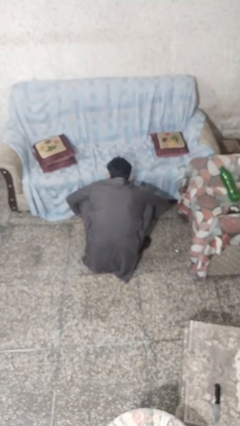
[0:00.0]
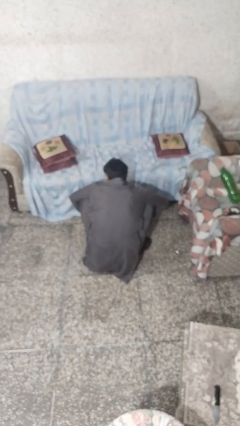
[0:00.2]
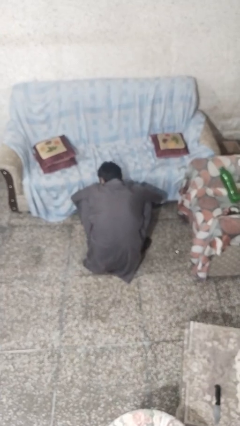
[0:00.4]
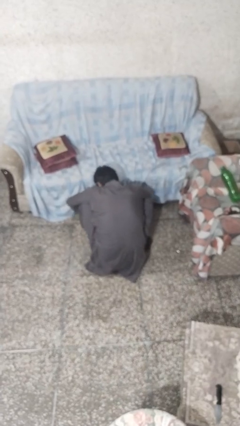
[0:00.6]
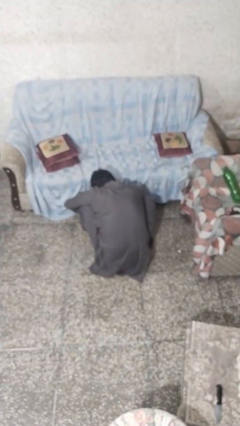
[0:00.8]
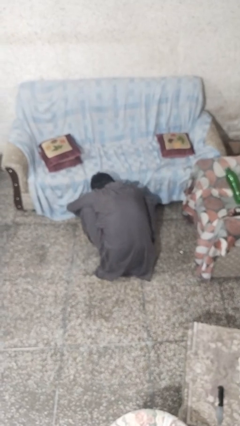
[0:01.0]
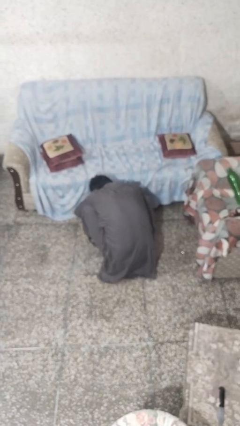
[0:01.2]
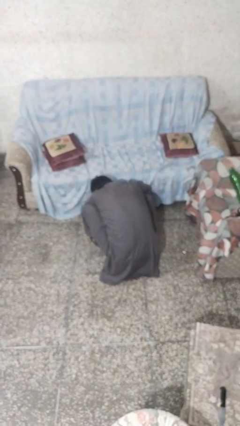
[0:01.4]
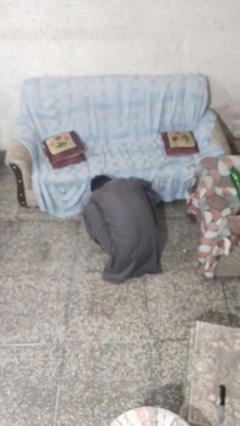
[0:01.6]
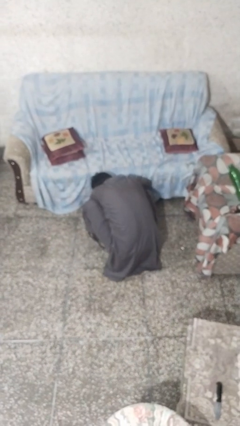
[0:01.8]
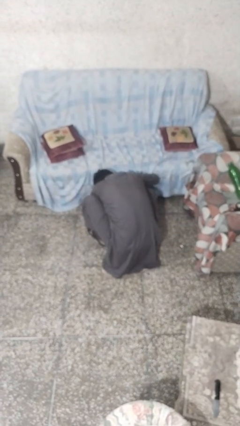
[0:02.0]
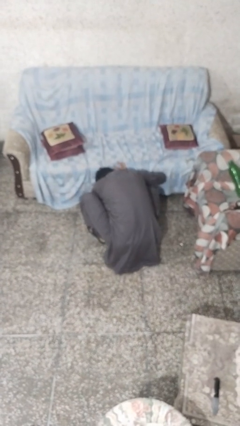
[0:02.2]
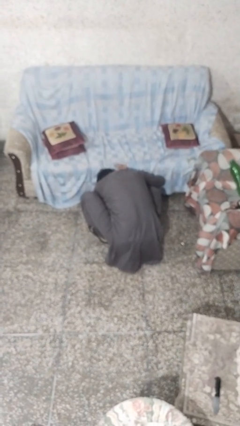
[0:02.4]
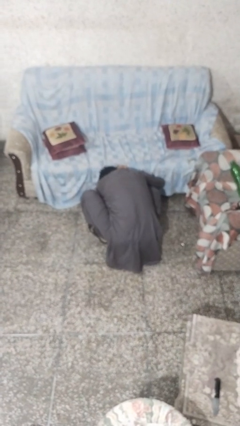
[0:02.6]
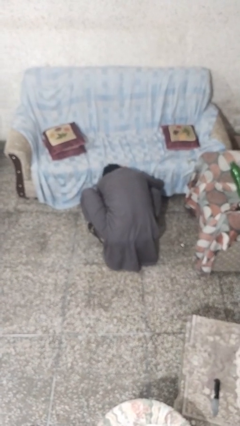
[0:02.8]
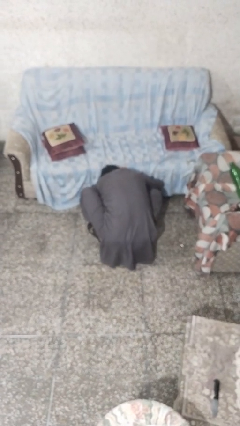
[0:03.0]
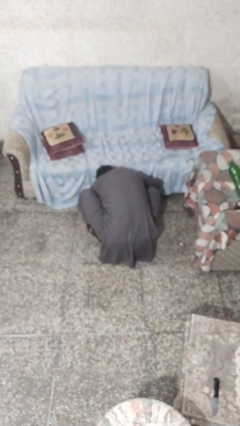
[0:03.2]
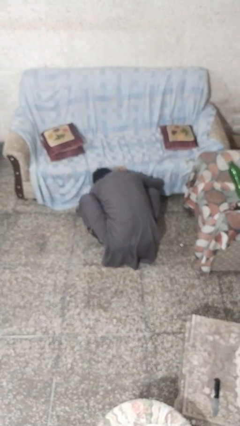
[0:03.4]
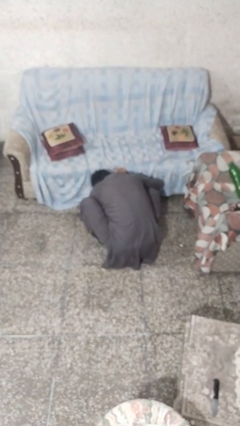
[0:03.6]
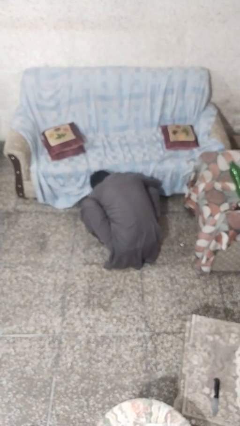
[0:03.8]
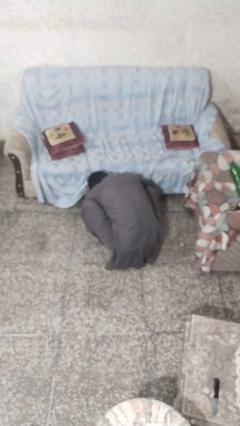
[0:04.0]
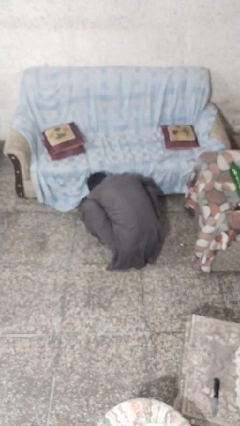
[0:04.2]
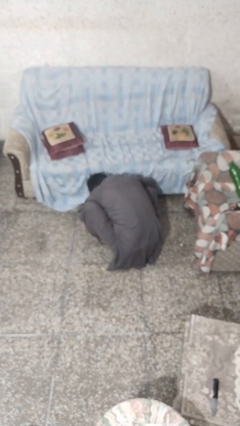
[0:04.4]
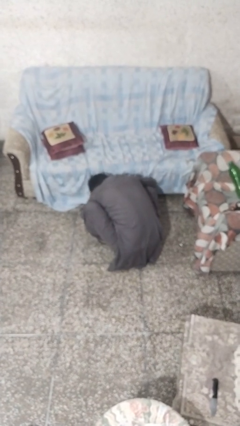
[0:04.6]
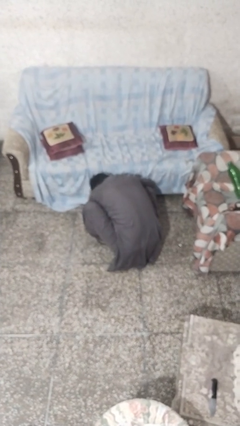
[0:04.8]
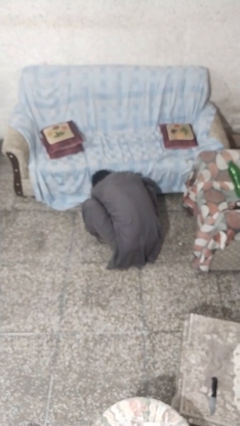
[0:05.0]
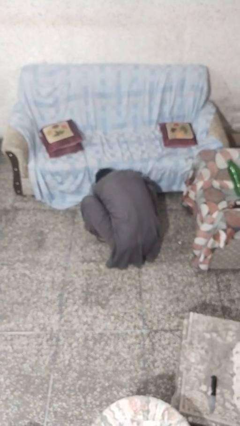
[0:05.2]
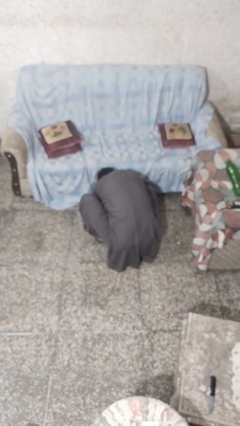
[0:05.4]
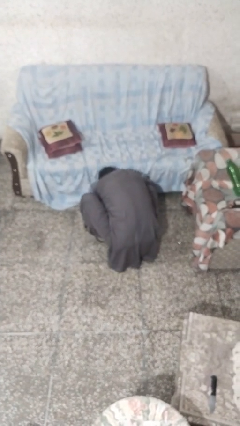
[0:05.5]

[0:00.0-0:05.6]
person searches under couch

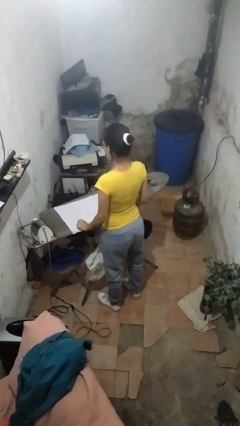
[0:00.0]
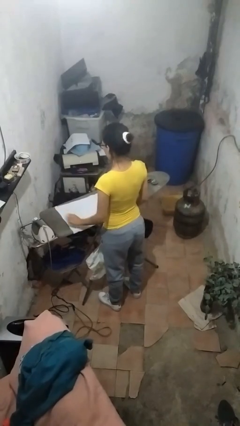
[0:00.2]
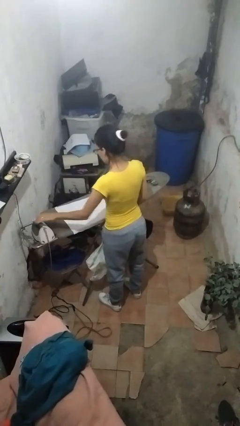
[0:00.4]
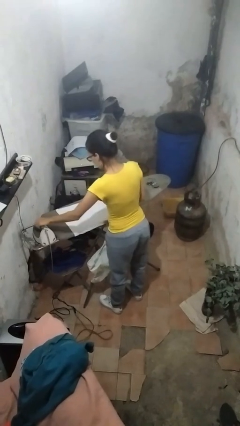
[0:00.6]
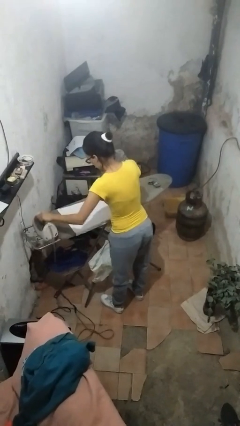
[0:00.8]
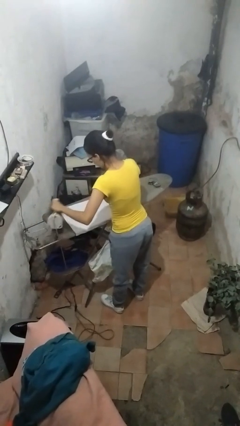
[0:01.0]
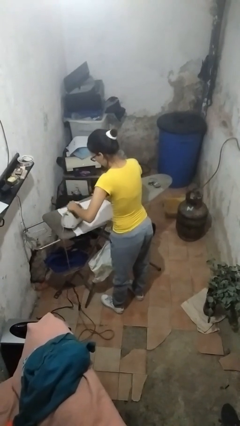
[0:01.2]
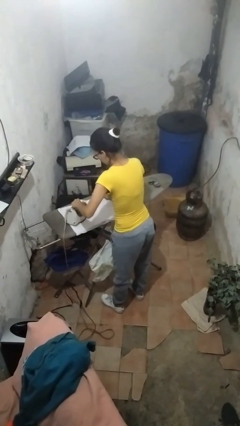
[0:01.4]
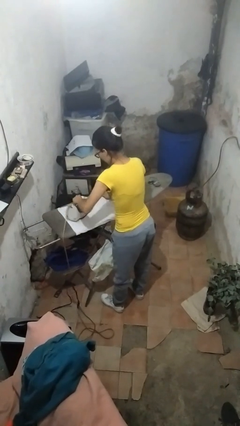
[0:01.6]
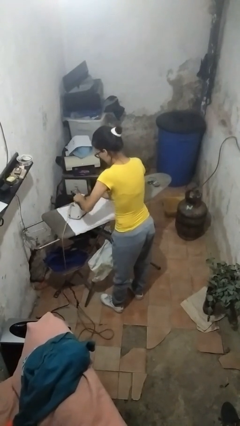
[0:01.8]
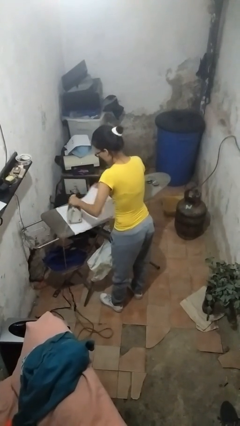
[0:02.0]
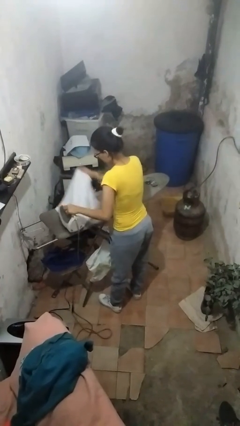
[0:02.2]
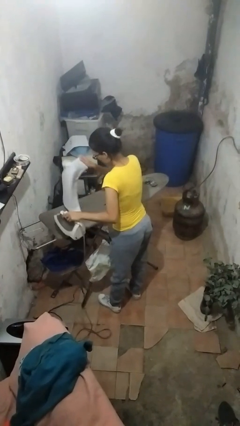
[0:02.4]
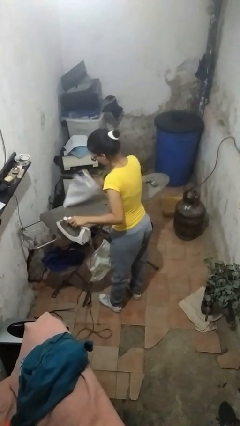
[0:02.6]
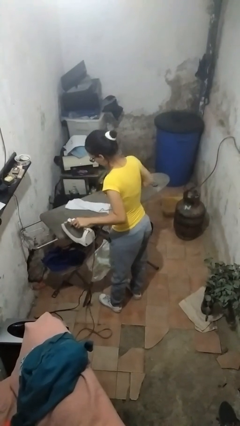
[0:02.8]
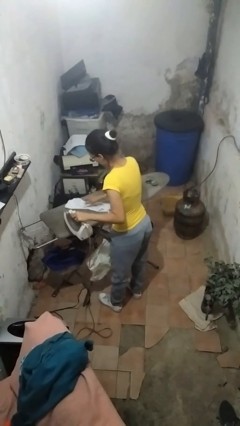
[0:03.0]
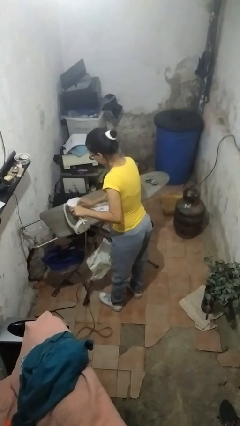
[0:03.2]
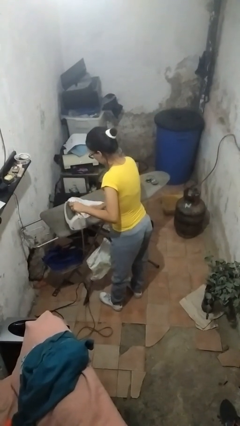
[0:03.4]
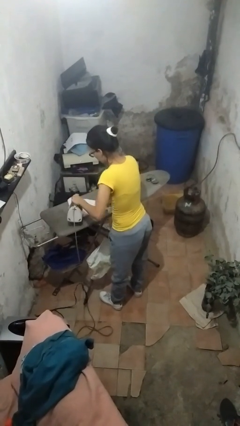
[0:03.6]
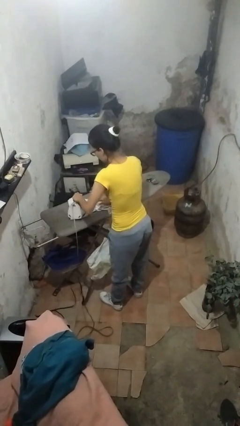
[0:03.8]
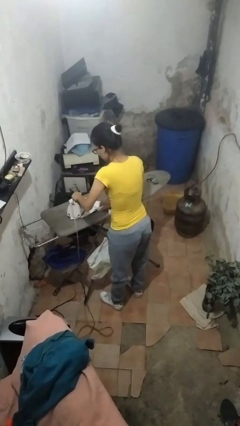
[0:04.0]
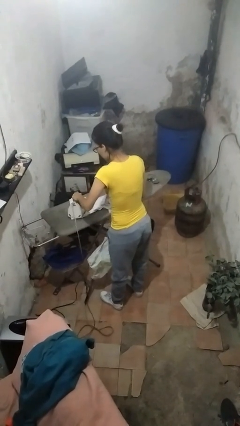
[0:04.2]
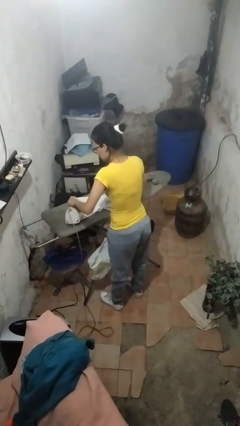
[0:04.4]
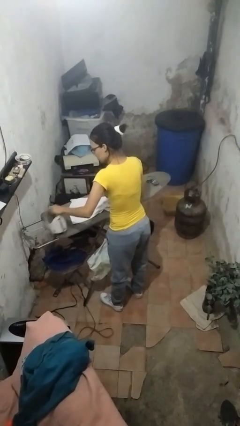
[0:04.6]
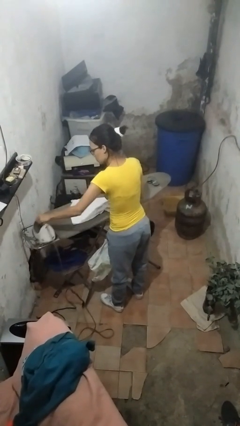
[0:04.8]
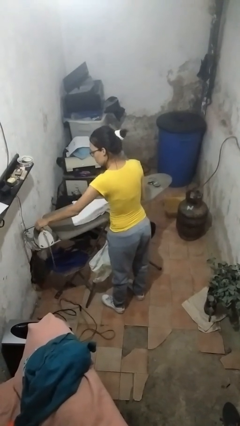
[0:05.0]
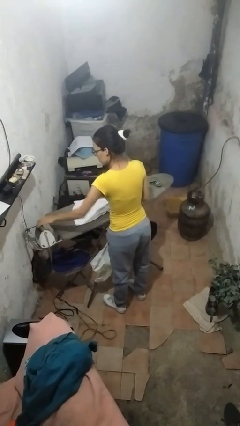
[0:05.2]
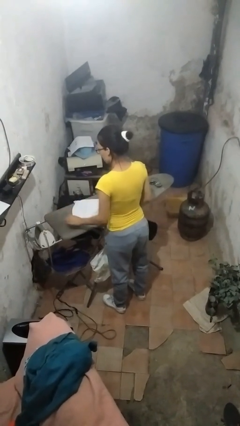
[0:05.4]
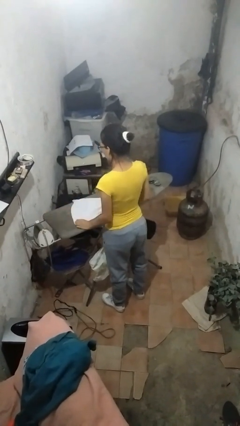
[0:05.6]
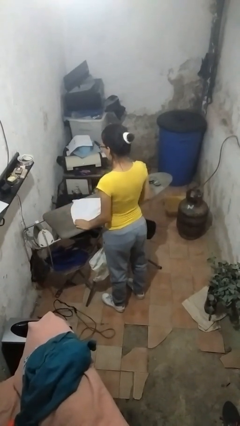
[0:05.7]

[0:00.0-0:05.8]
person irons clothes

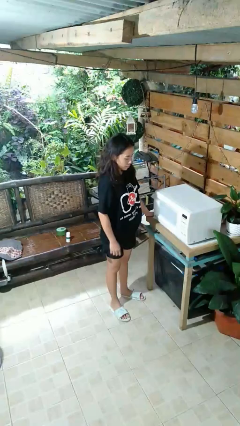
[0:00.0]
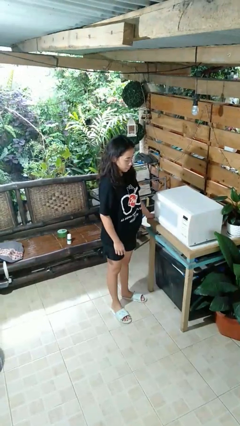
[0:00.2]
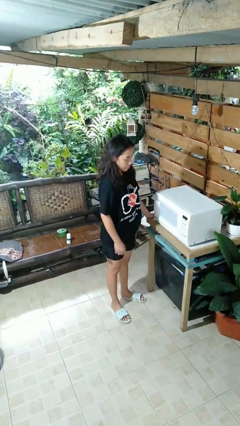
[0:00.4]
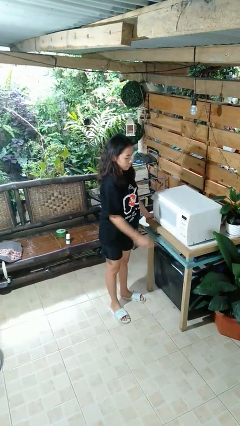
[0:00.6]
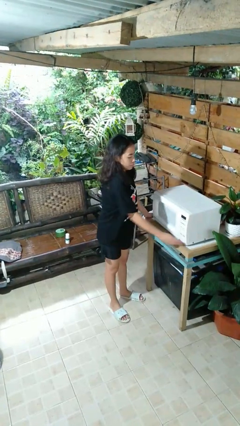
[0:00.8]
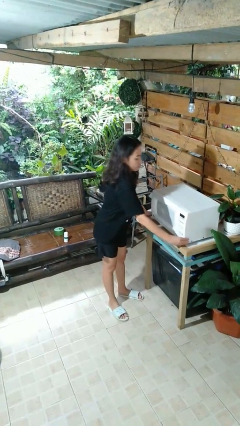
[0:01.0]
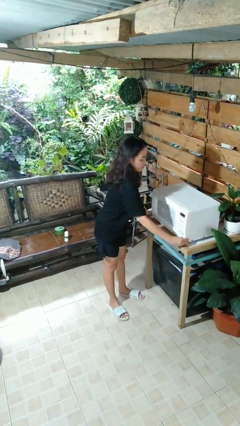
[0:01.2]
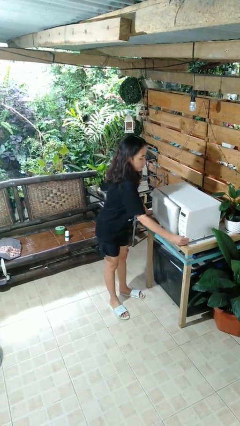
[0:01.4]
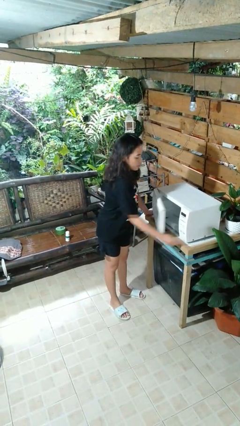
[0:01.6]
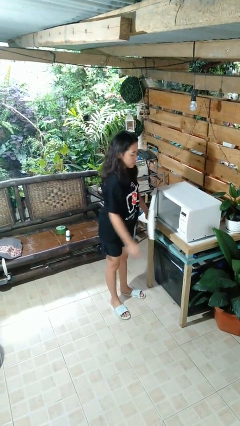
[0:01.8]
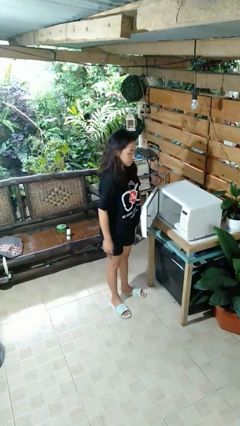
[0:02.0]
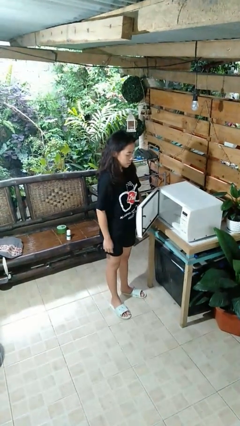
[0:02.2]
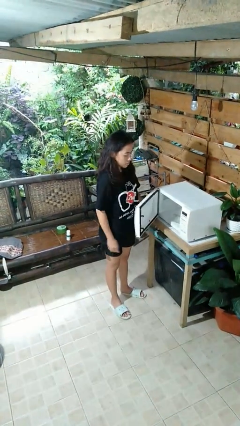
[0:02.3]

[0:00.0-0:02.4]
person opens microwave

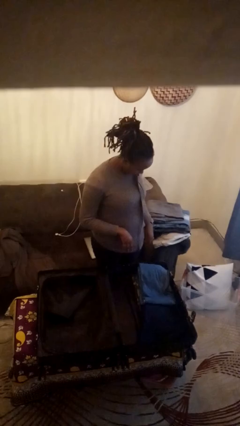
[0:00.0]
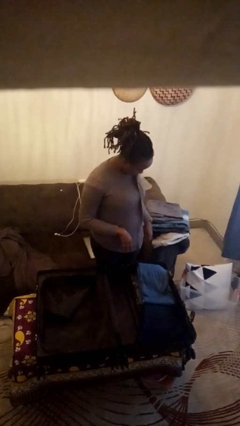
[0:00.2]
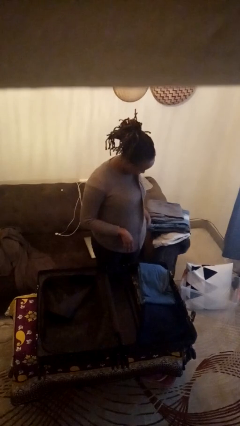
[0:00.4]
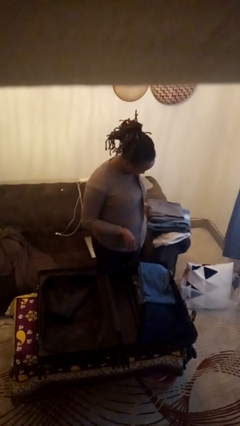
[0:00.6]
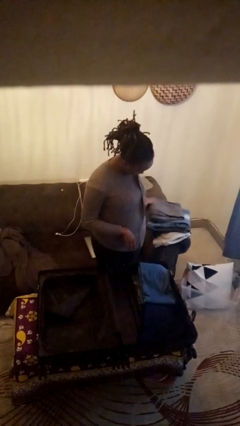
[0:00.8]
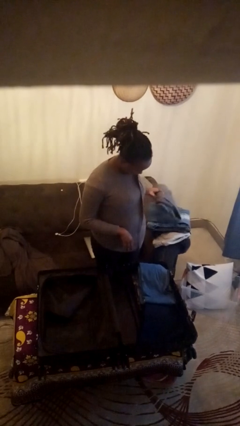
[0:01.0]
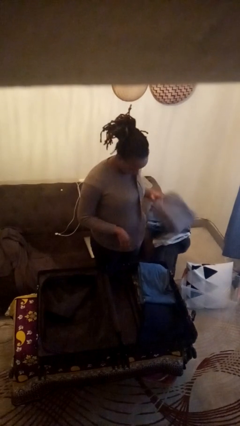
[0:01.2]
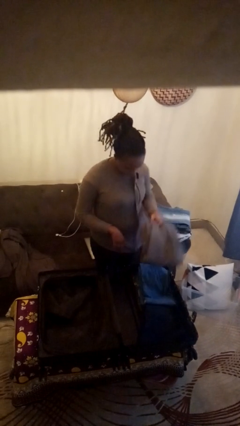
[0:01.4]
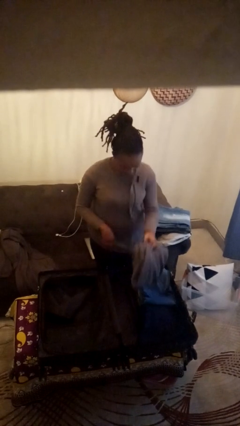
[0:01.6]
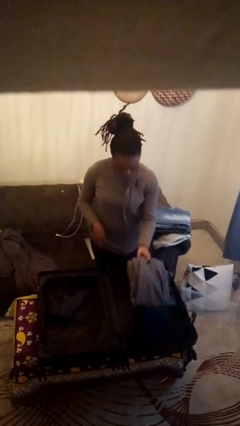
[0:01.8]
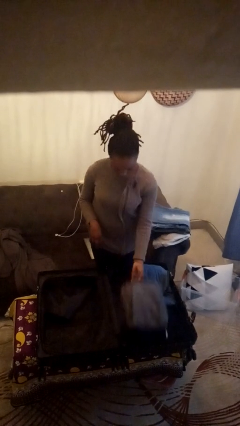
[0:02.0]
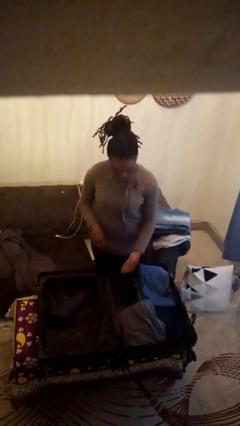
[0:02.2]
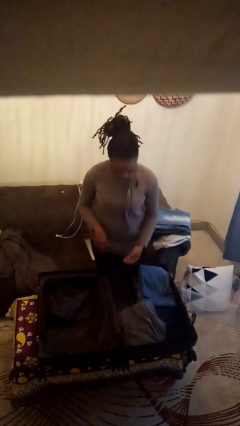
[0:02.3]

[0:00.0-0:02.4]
person loads clothes into suitcase

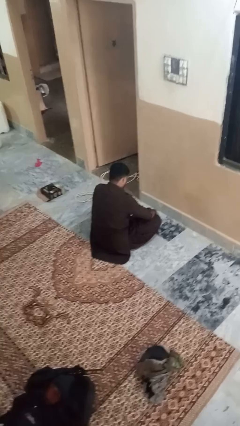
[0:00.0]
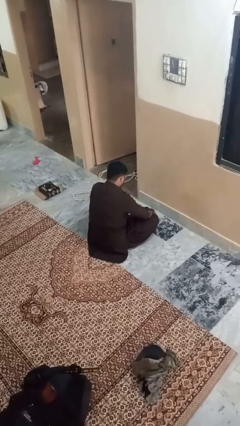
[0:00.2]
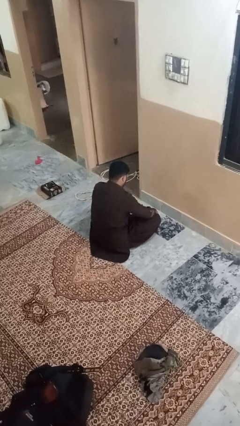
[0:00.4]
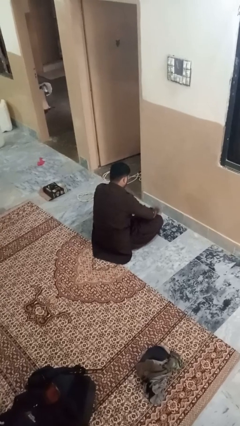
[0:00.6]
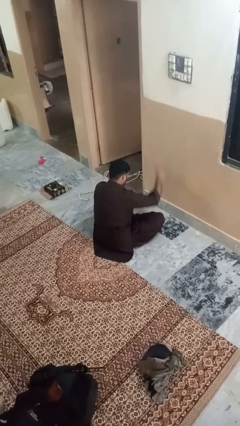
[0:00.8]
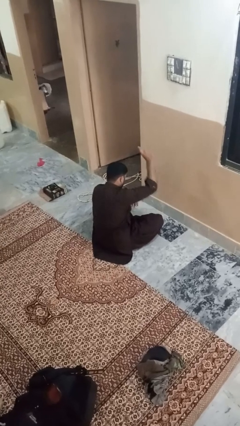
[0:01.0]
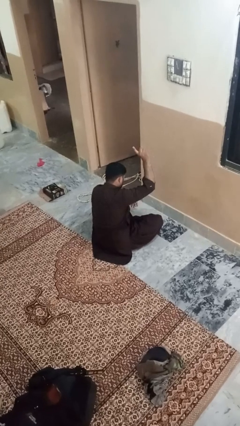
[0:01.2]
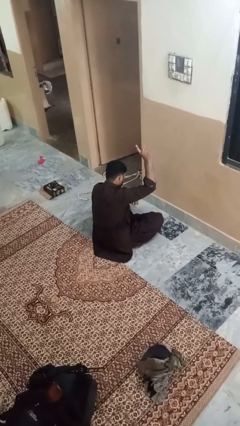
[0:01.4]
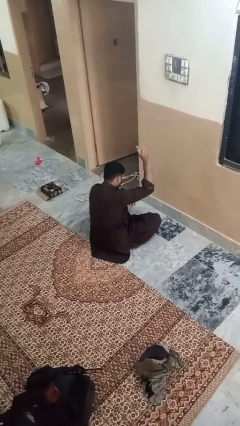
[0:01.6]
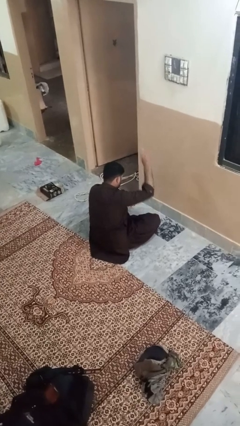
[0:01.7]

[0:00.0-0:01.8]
person gestures number one
